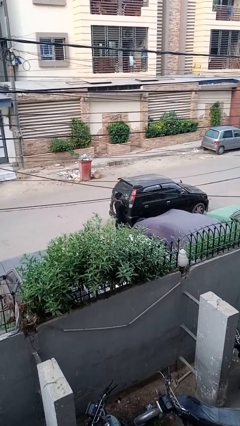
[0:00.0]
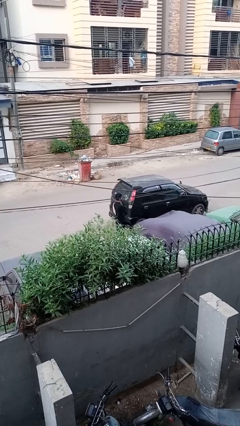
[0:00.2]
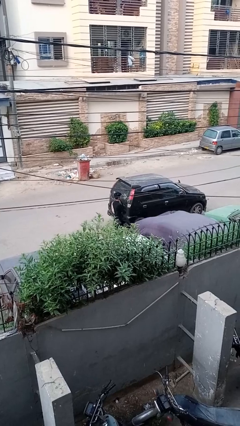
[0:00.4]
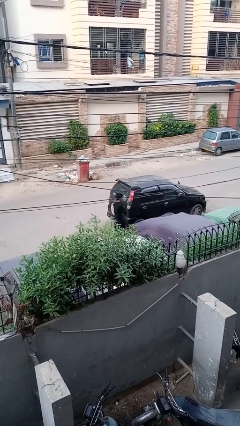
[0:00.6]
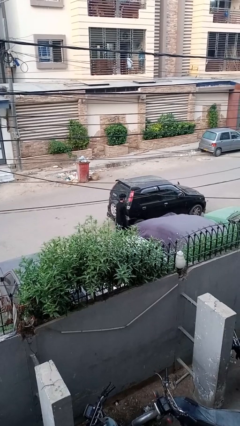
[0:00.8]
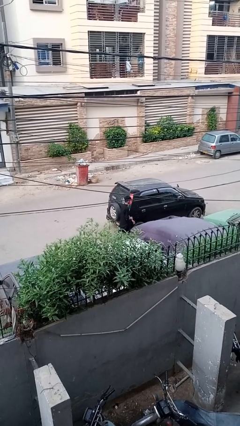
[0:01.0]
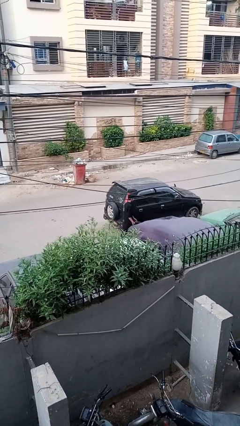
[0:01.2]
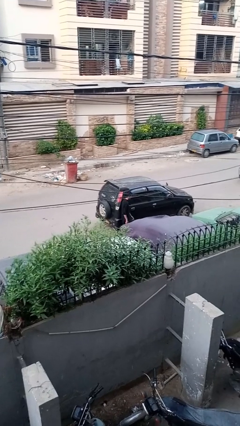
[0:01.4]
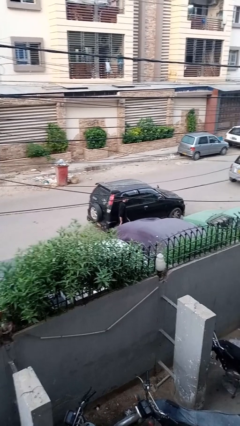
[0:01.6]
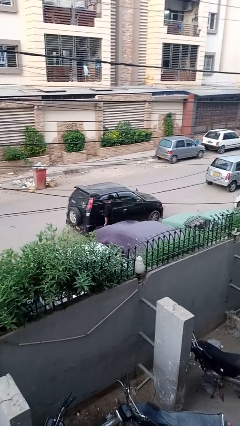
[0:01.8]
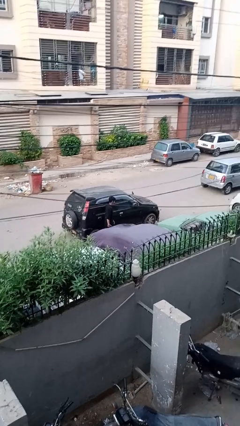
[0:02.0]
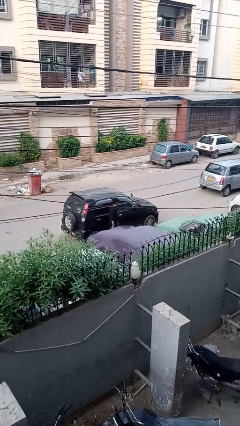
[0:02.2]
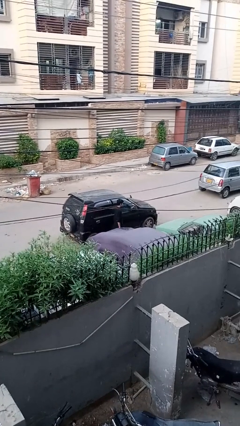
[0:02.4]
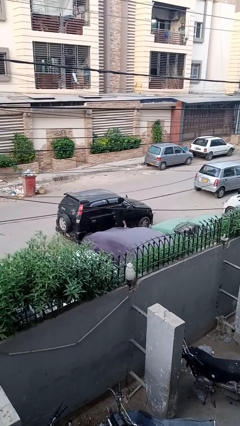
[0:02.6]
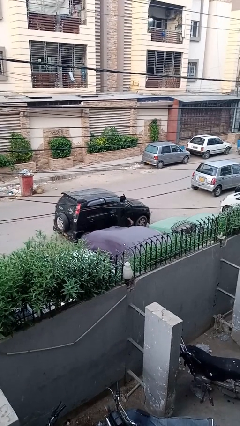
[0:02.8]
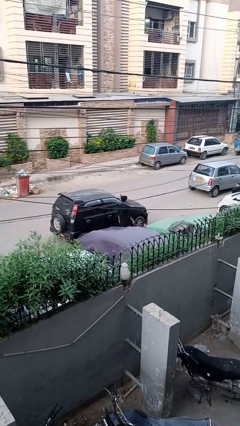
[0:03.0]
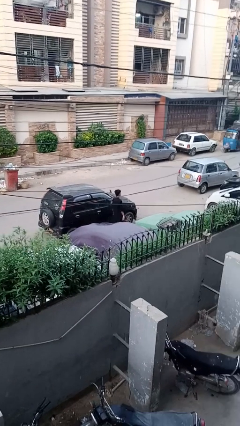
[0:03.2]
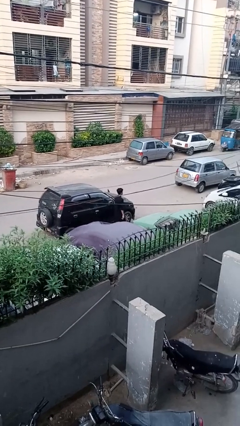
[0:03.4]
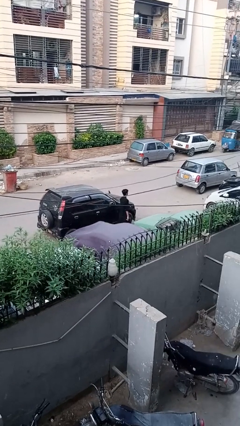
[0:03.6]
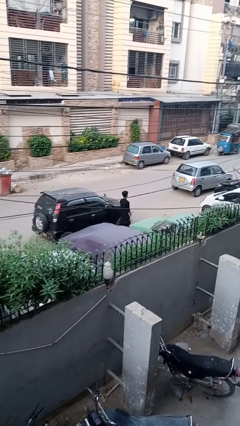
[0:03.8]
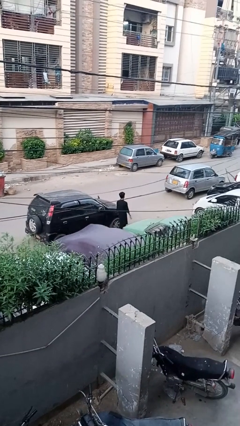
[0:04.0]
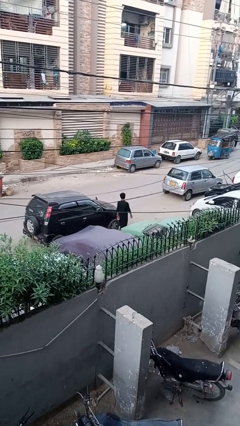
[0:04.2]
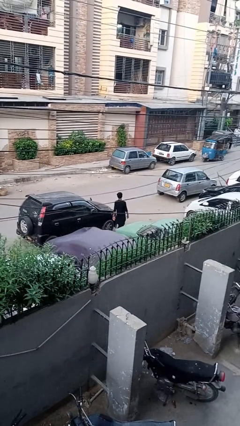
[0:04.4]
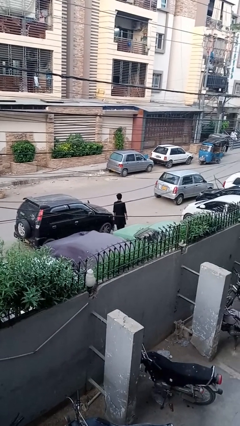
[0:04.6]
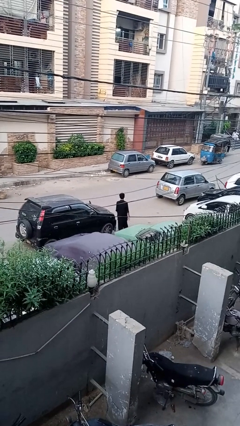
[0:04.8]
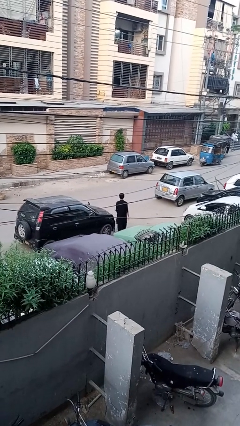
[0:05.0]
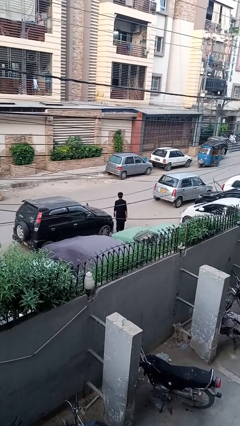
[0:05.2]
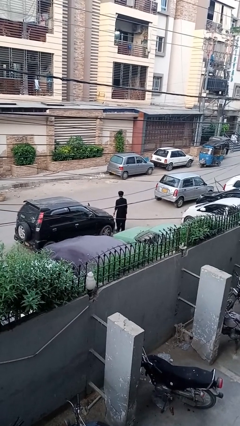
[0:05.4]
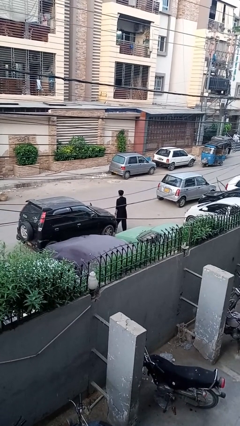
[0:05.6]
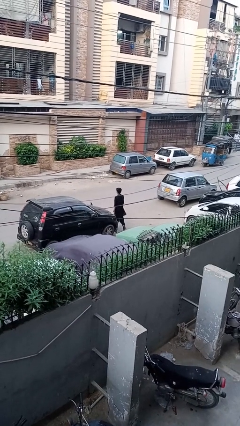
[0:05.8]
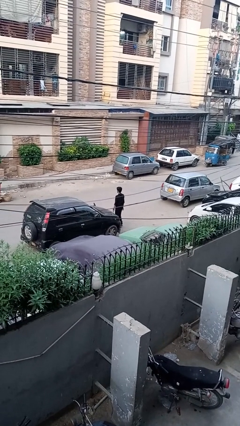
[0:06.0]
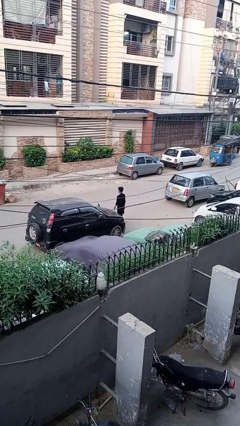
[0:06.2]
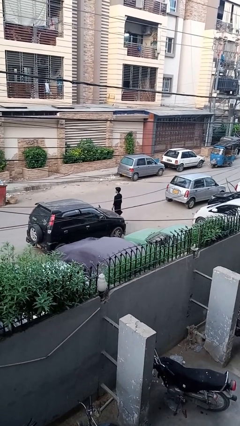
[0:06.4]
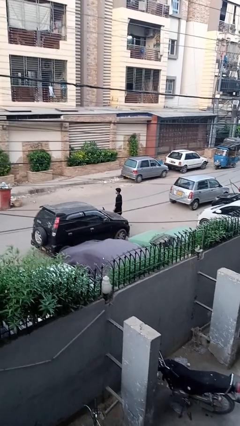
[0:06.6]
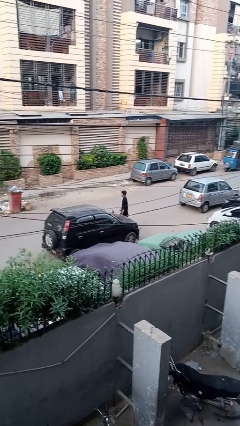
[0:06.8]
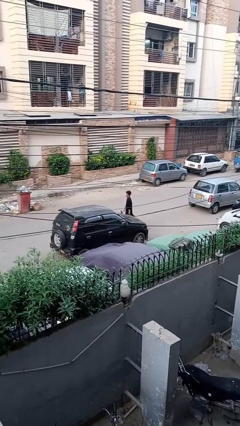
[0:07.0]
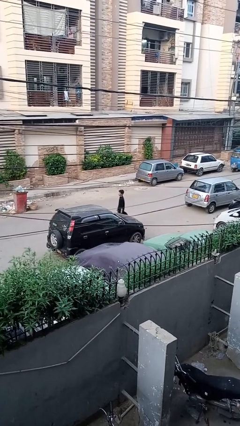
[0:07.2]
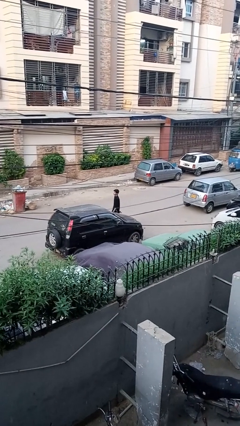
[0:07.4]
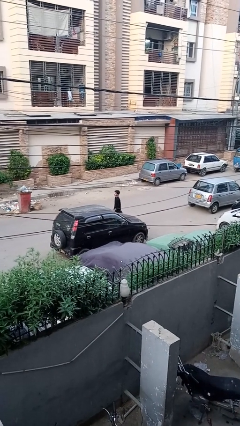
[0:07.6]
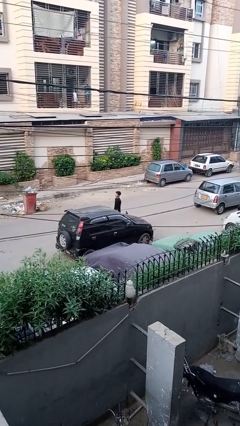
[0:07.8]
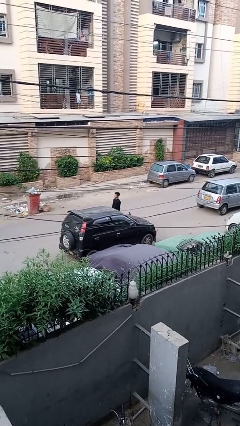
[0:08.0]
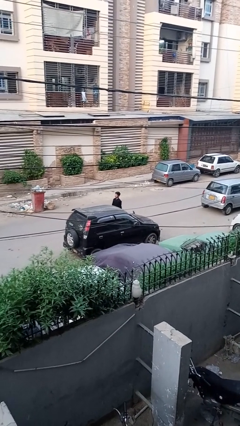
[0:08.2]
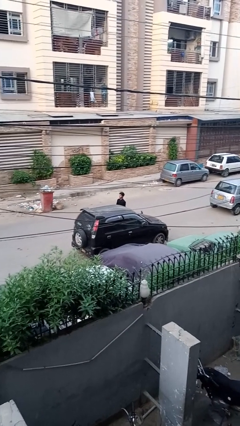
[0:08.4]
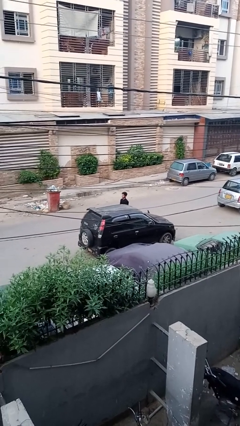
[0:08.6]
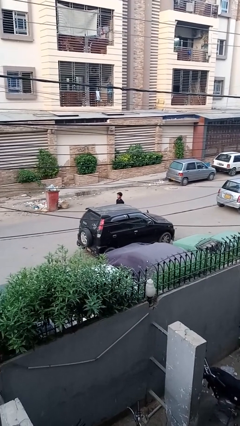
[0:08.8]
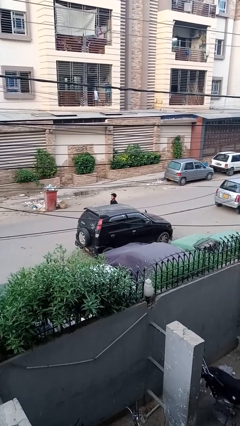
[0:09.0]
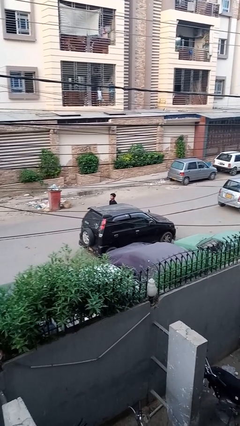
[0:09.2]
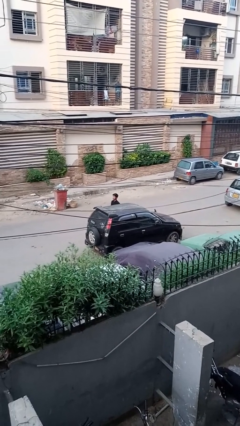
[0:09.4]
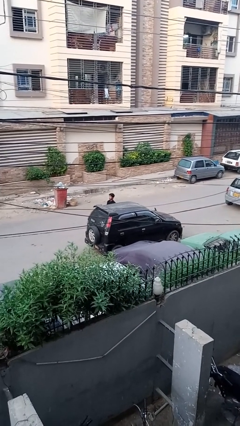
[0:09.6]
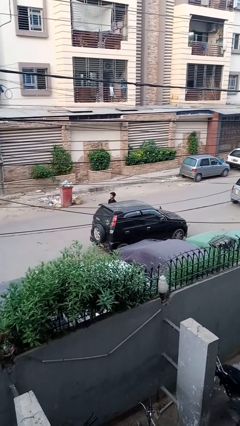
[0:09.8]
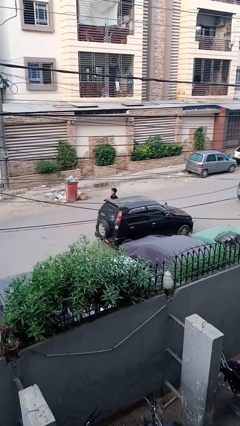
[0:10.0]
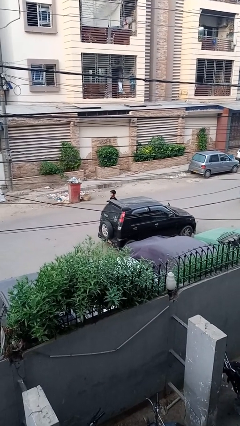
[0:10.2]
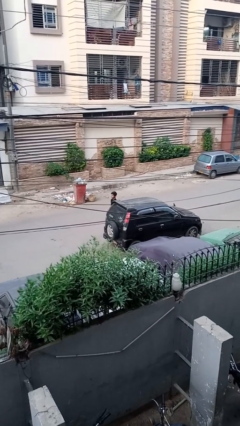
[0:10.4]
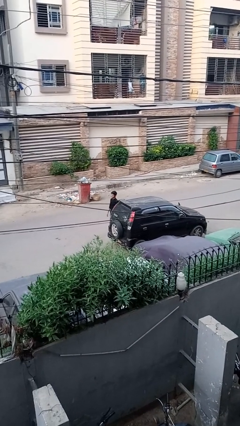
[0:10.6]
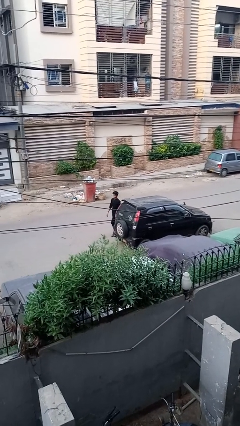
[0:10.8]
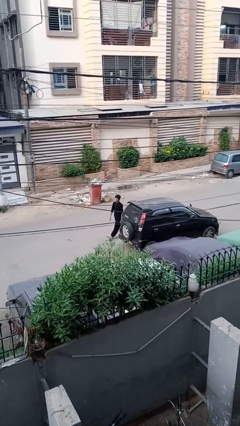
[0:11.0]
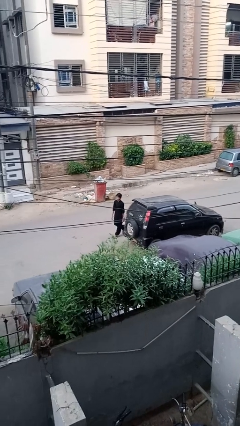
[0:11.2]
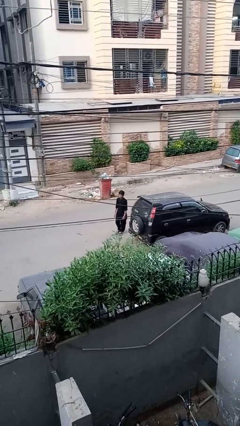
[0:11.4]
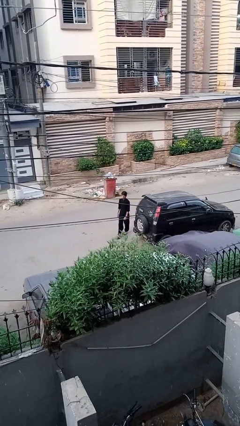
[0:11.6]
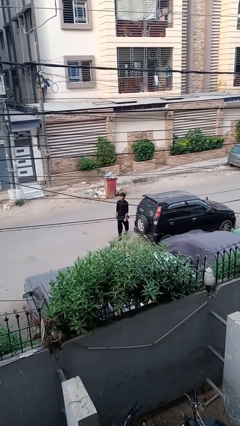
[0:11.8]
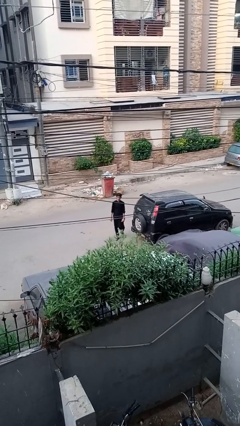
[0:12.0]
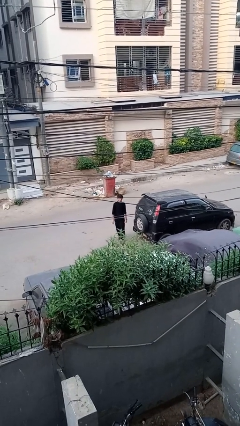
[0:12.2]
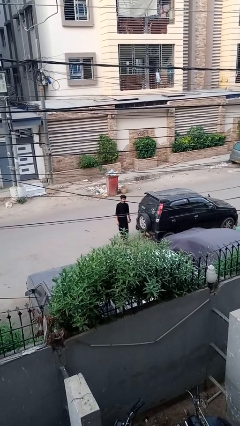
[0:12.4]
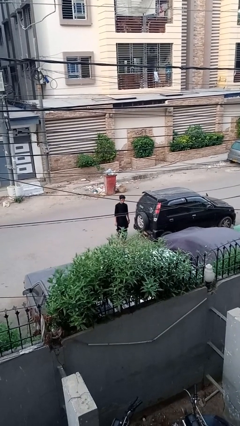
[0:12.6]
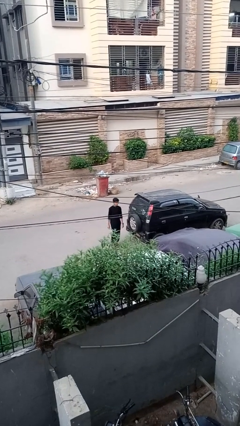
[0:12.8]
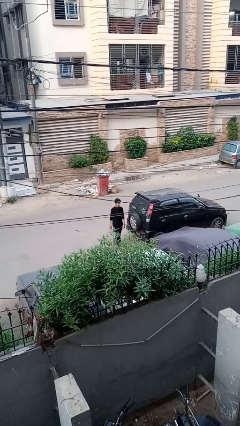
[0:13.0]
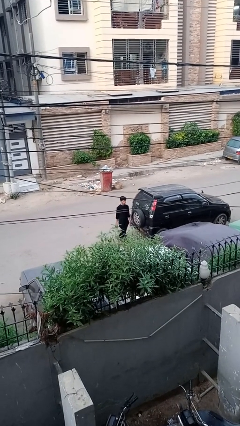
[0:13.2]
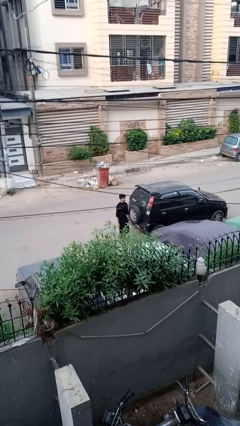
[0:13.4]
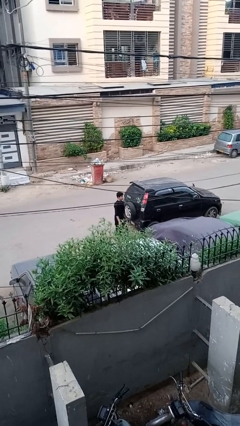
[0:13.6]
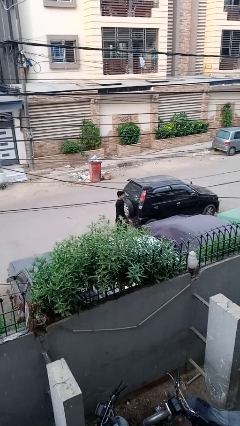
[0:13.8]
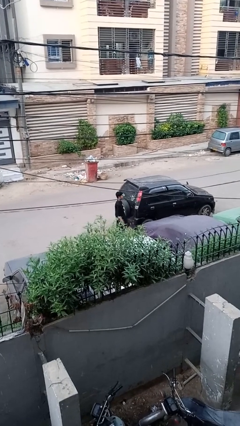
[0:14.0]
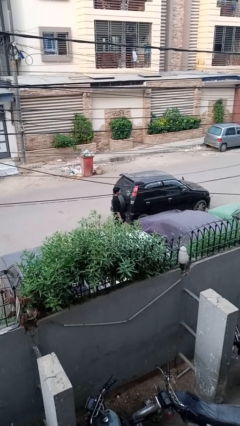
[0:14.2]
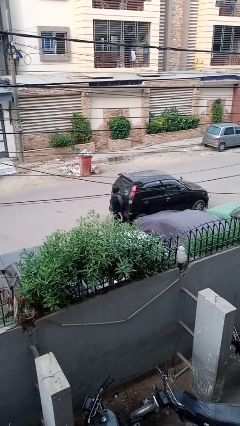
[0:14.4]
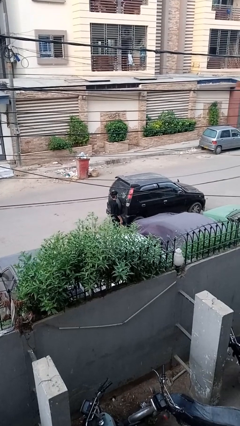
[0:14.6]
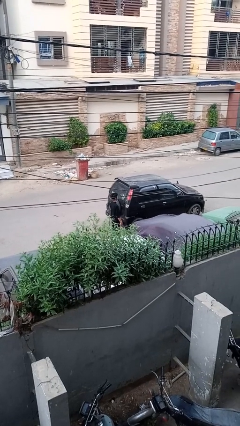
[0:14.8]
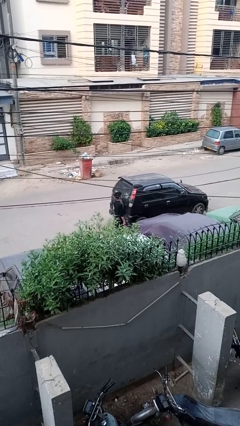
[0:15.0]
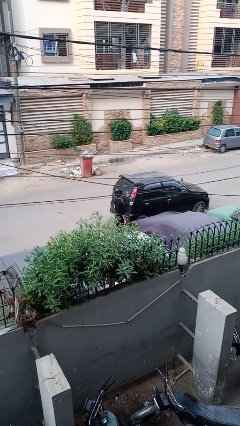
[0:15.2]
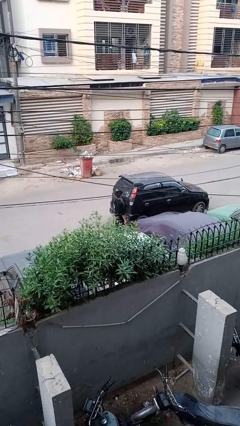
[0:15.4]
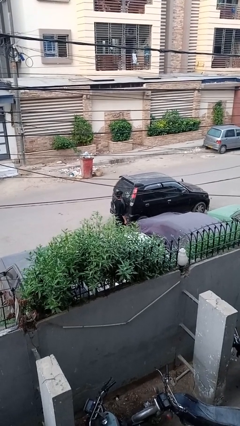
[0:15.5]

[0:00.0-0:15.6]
person walks around car

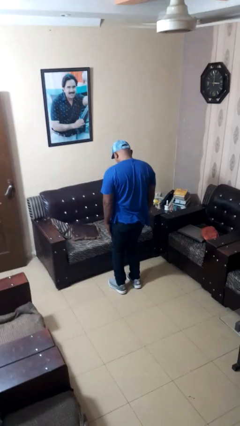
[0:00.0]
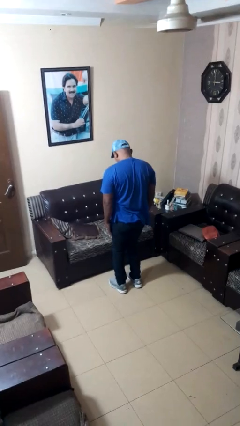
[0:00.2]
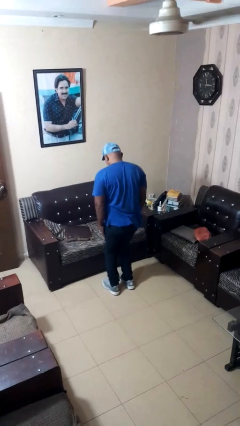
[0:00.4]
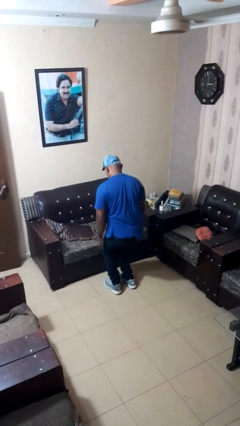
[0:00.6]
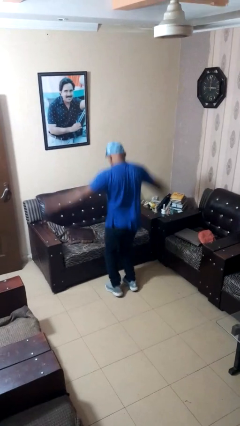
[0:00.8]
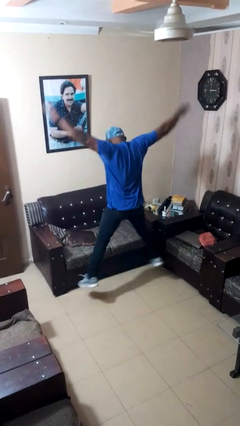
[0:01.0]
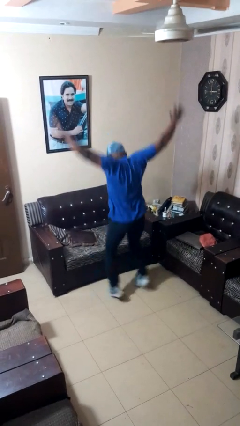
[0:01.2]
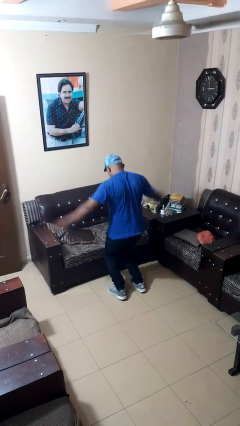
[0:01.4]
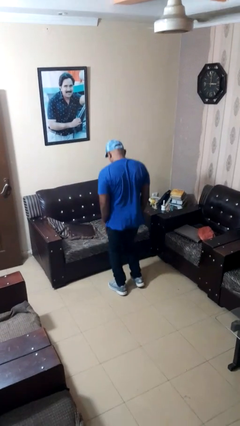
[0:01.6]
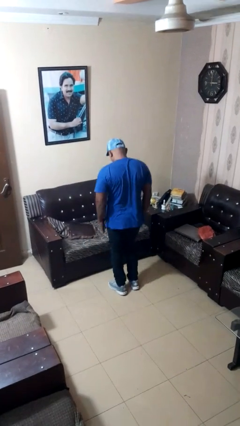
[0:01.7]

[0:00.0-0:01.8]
person exercises with jumping jacks
